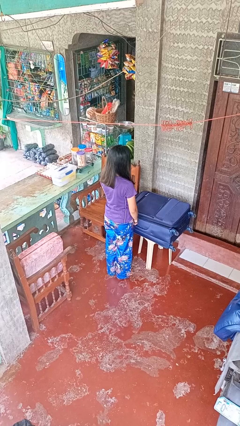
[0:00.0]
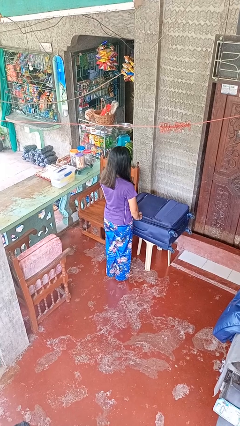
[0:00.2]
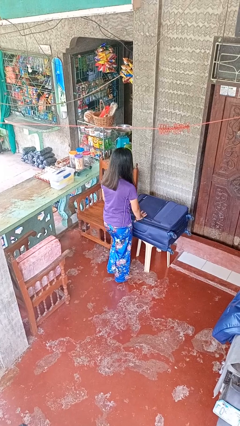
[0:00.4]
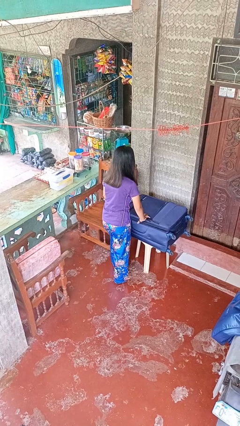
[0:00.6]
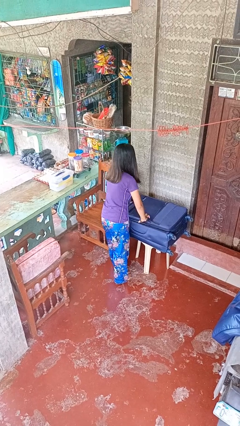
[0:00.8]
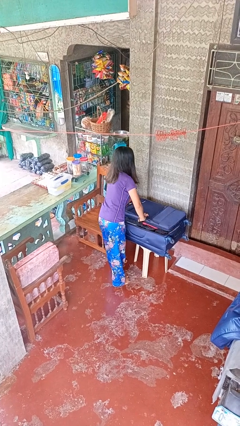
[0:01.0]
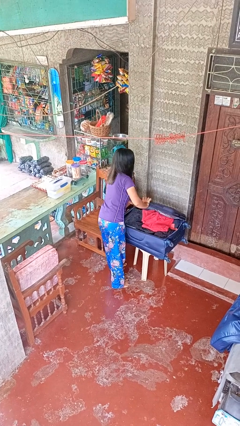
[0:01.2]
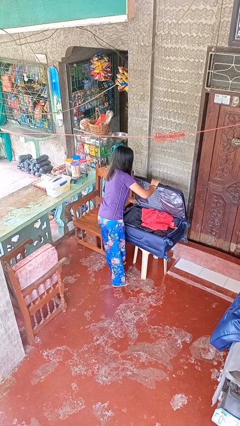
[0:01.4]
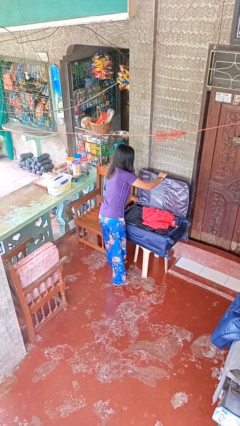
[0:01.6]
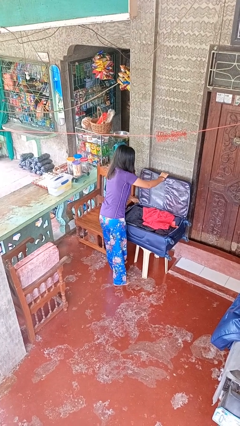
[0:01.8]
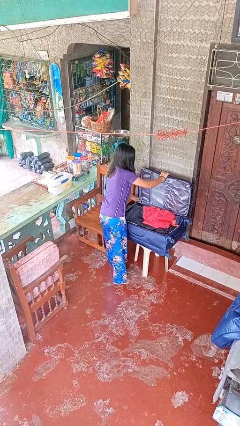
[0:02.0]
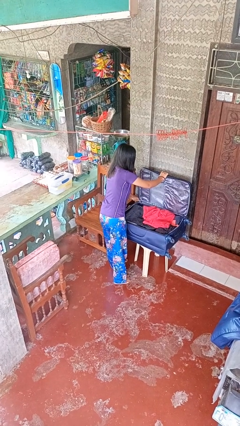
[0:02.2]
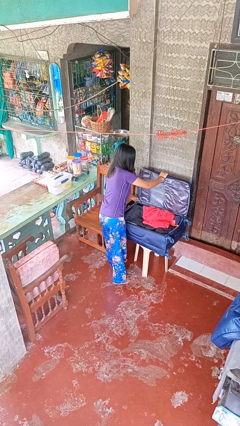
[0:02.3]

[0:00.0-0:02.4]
person opens suitcase

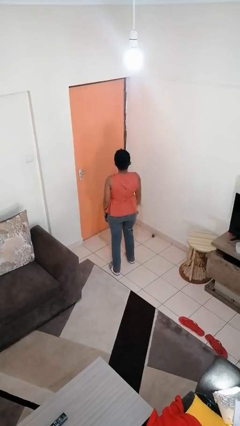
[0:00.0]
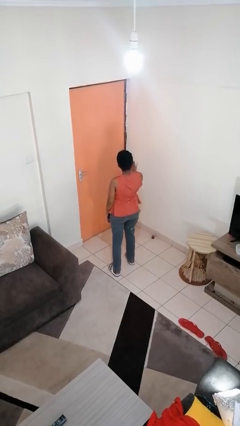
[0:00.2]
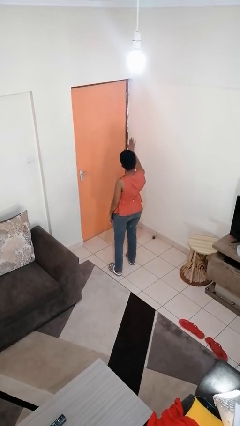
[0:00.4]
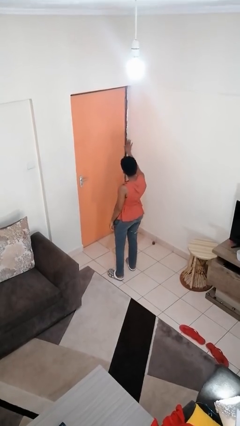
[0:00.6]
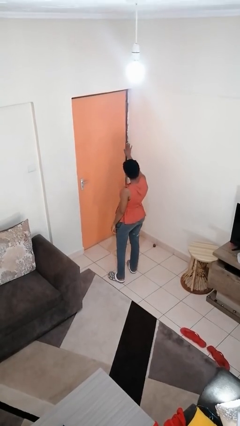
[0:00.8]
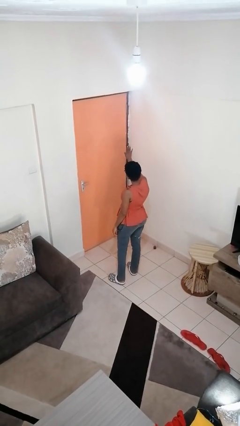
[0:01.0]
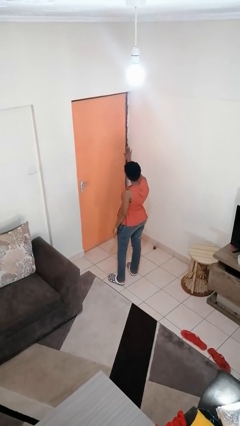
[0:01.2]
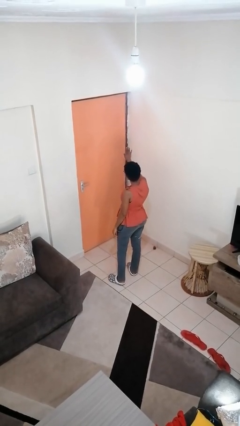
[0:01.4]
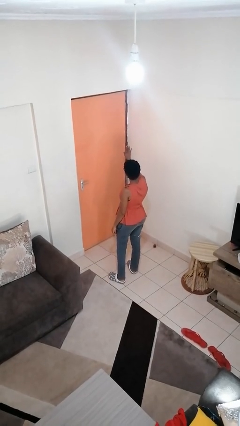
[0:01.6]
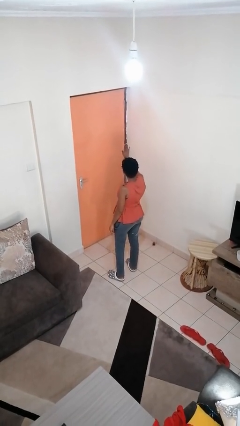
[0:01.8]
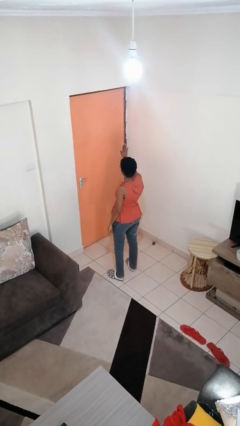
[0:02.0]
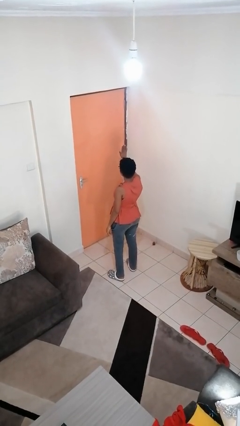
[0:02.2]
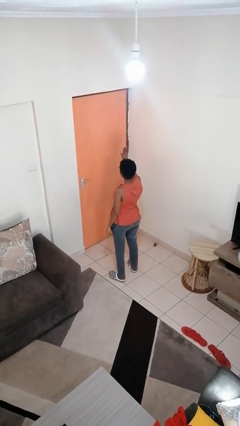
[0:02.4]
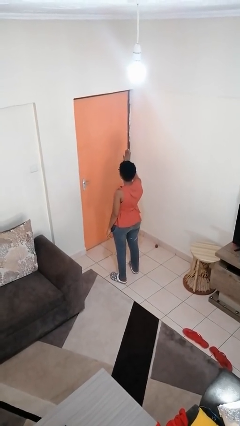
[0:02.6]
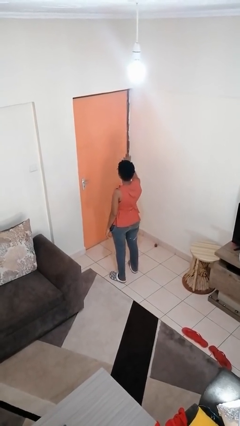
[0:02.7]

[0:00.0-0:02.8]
person gestures stop

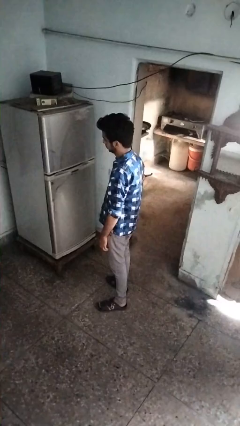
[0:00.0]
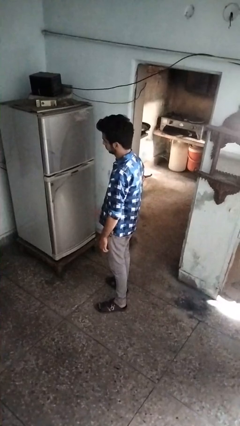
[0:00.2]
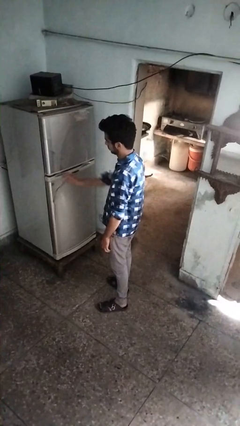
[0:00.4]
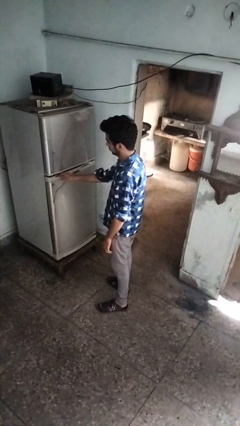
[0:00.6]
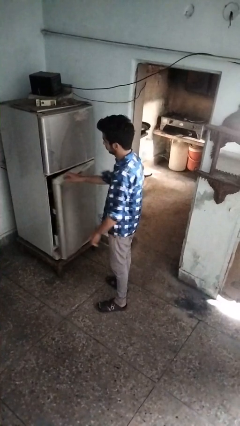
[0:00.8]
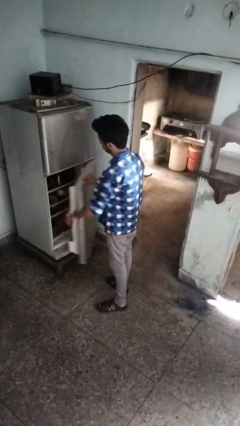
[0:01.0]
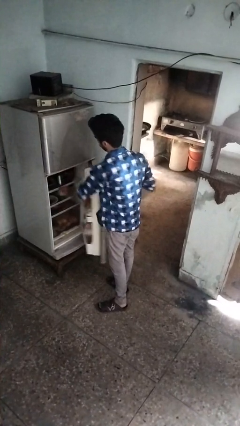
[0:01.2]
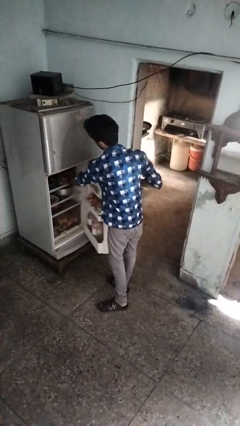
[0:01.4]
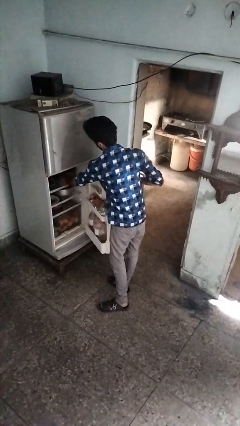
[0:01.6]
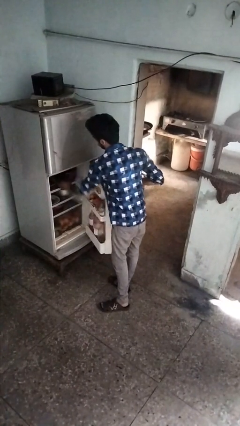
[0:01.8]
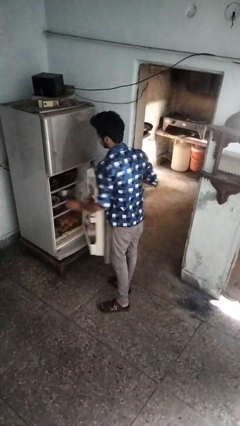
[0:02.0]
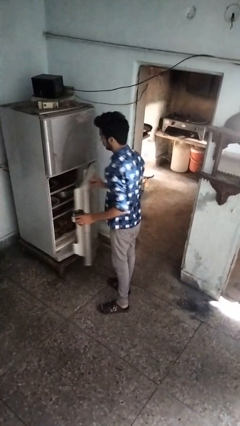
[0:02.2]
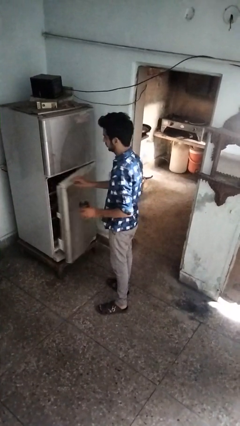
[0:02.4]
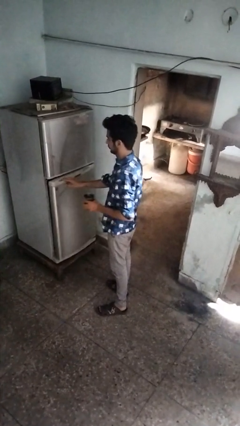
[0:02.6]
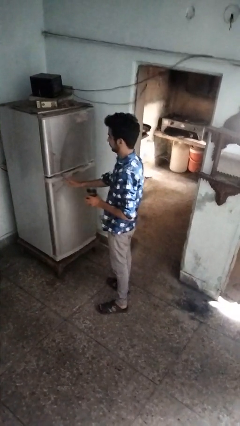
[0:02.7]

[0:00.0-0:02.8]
person takes object from refrigerator

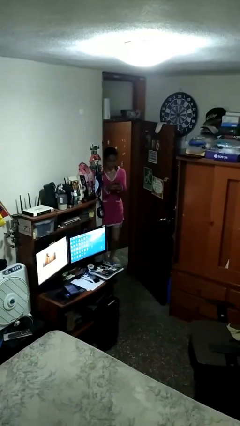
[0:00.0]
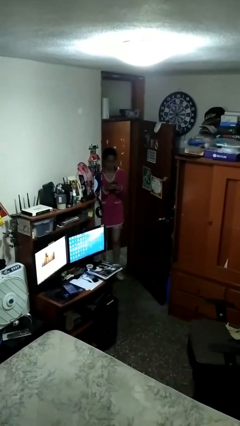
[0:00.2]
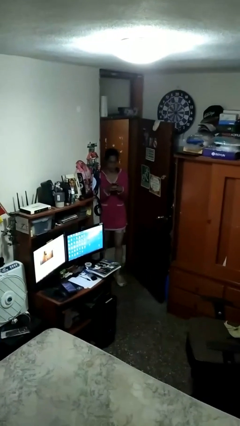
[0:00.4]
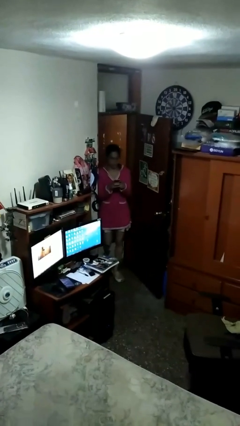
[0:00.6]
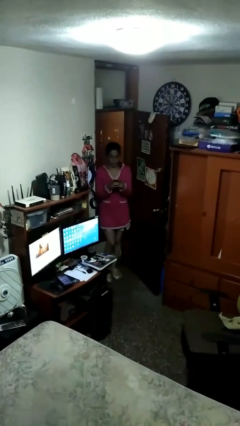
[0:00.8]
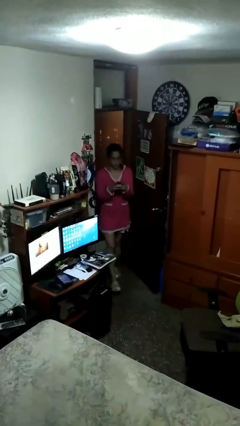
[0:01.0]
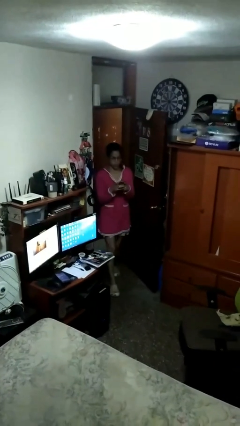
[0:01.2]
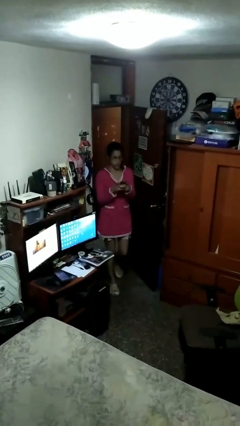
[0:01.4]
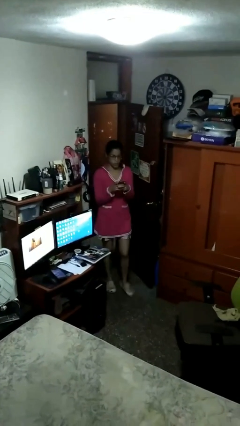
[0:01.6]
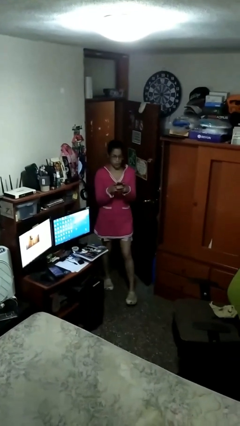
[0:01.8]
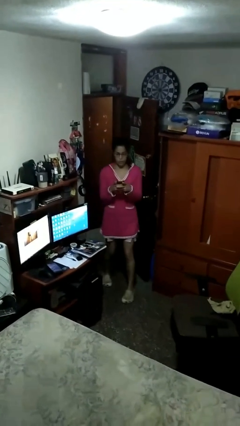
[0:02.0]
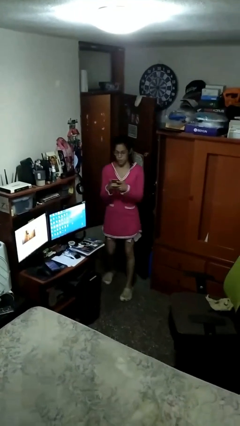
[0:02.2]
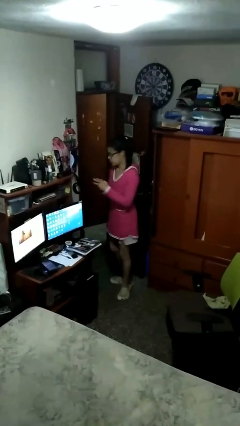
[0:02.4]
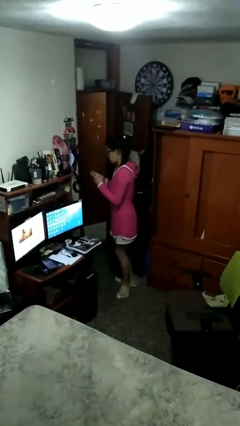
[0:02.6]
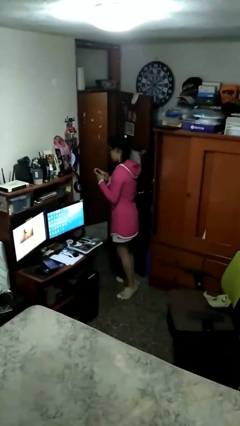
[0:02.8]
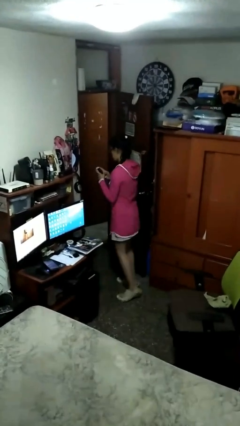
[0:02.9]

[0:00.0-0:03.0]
person enters scene through structure

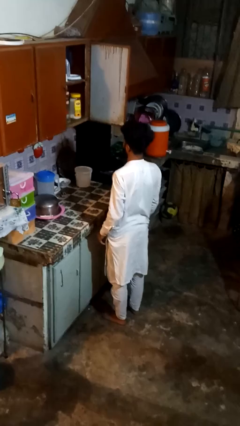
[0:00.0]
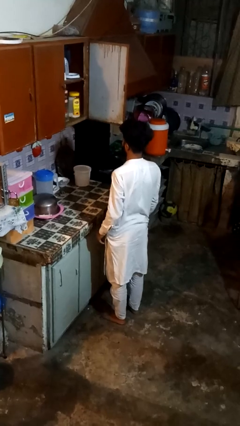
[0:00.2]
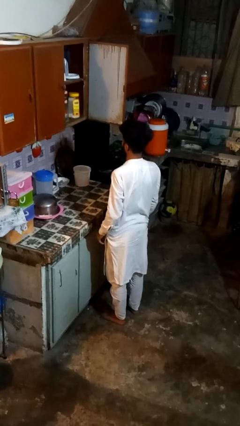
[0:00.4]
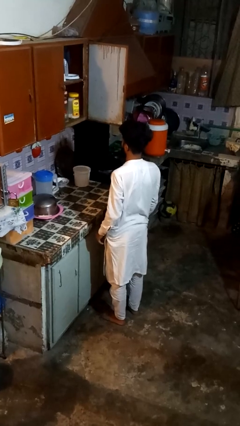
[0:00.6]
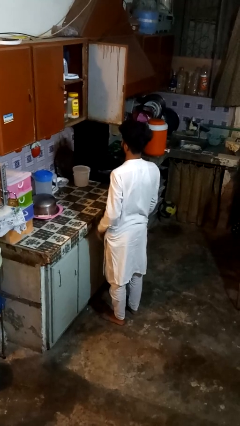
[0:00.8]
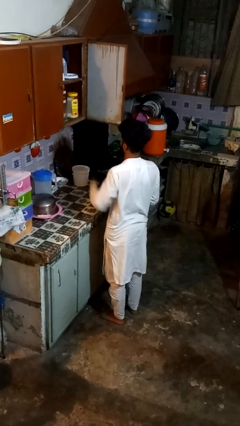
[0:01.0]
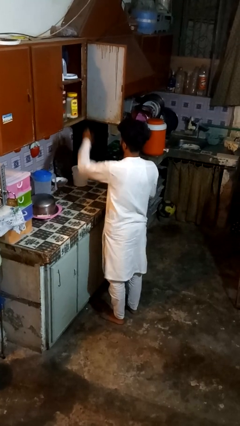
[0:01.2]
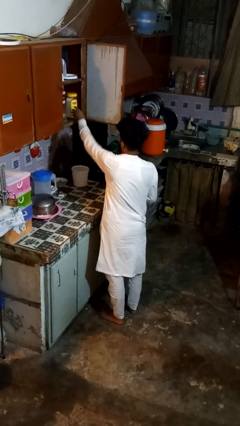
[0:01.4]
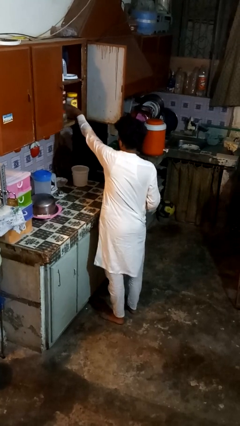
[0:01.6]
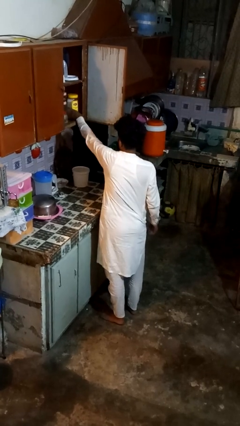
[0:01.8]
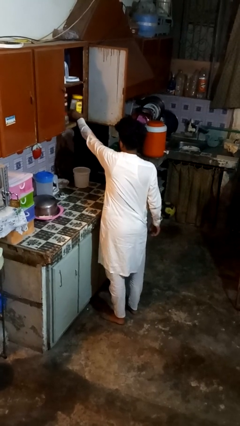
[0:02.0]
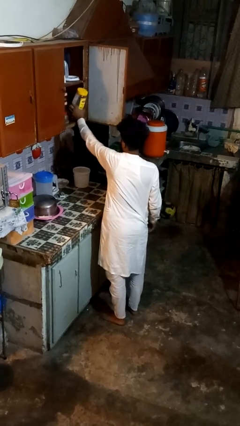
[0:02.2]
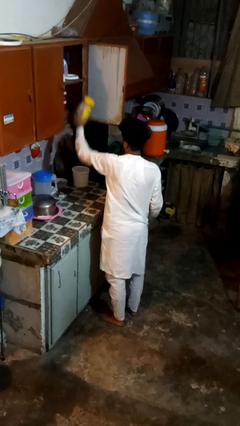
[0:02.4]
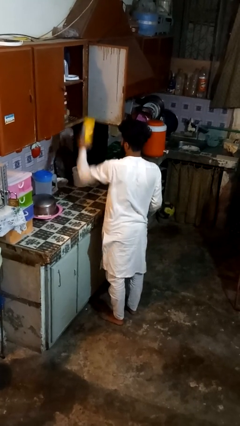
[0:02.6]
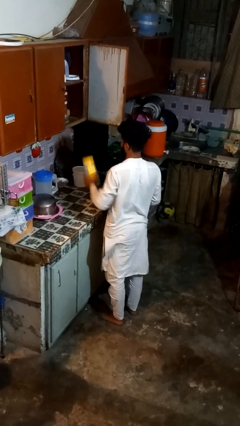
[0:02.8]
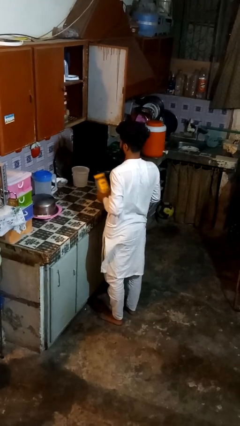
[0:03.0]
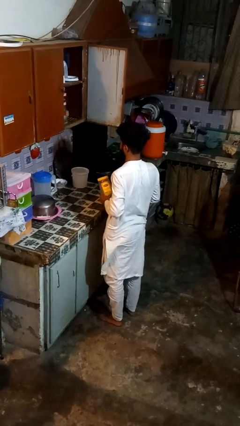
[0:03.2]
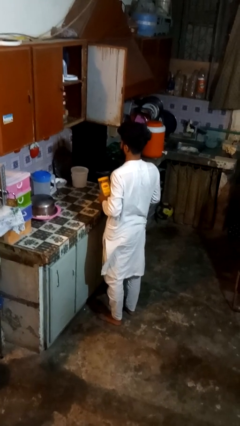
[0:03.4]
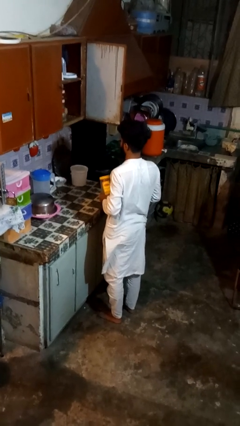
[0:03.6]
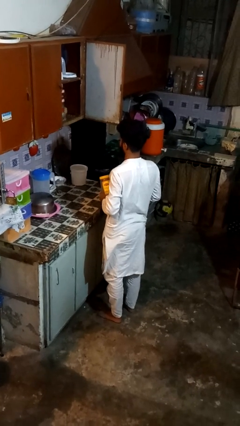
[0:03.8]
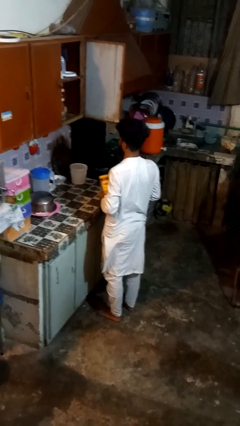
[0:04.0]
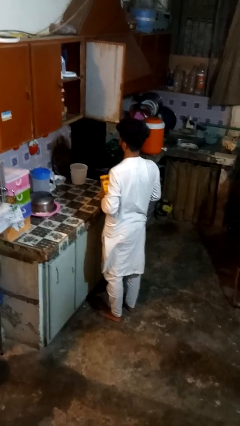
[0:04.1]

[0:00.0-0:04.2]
person puts object in cabinet

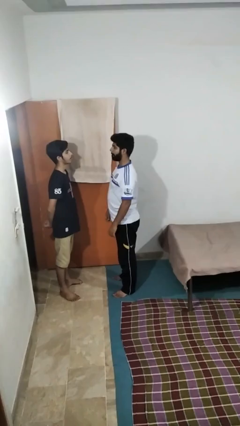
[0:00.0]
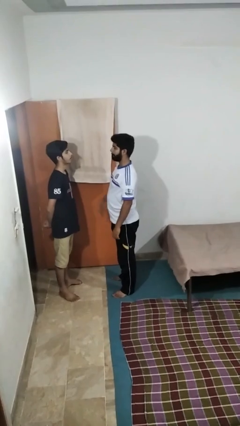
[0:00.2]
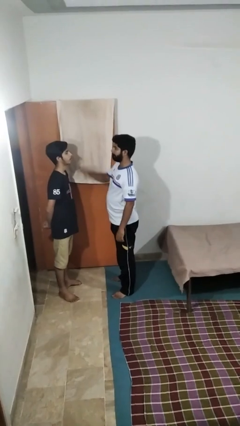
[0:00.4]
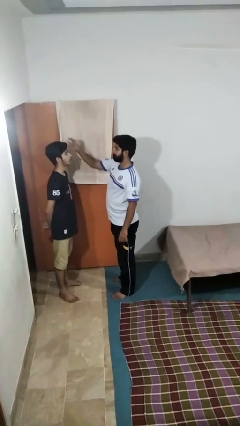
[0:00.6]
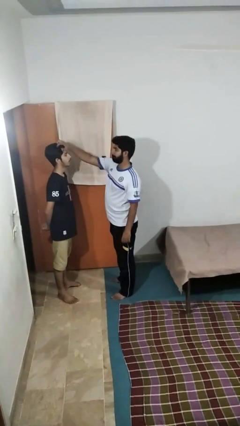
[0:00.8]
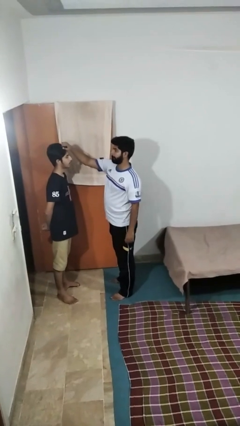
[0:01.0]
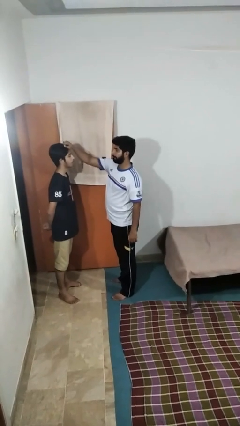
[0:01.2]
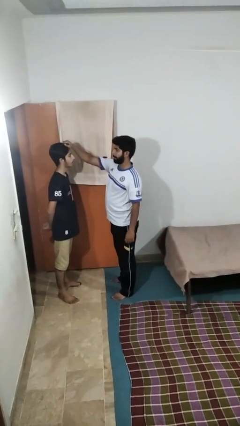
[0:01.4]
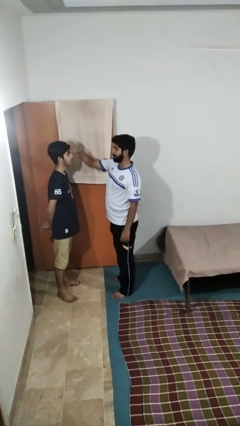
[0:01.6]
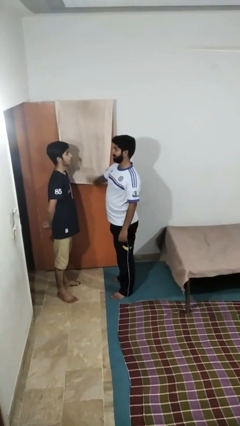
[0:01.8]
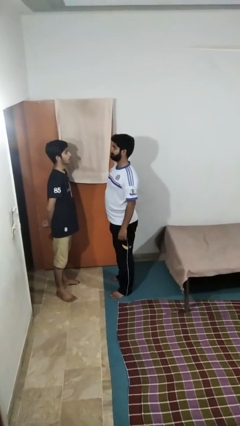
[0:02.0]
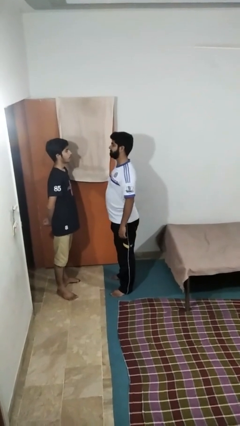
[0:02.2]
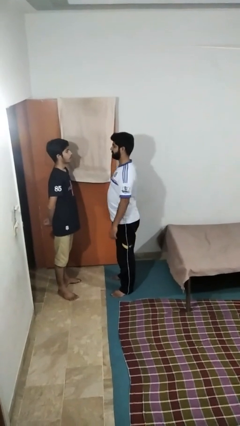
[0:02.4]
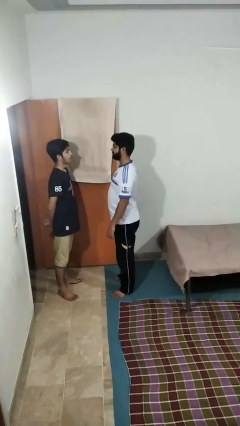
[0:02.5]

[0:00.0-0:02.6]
person grabs person by hair
